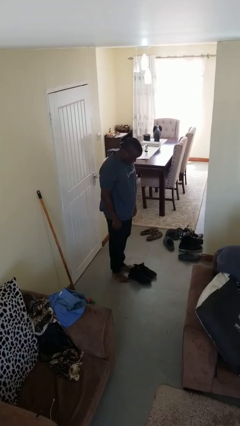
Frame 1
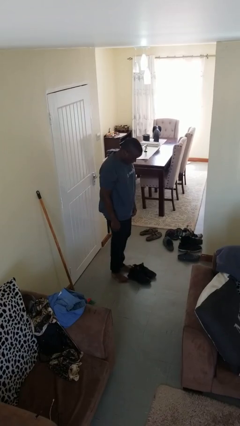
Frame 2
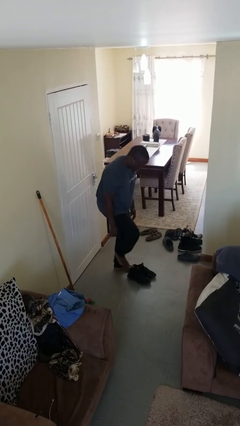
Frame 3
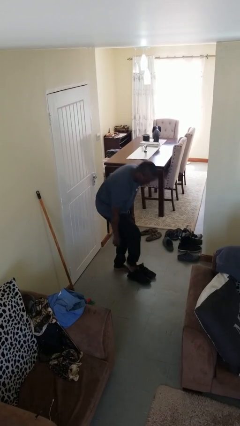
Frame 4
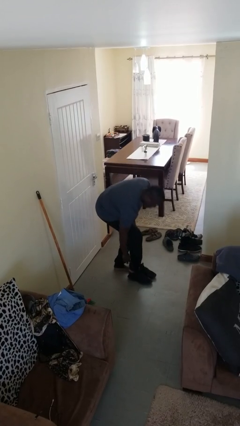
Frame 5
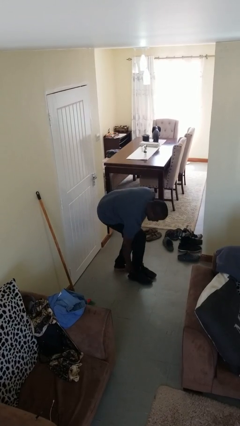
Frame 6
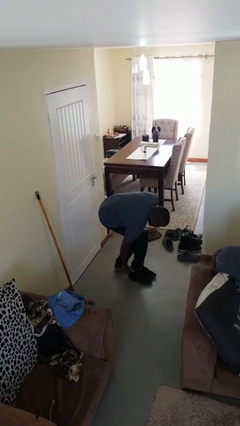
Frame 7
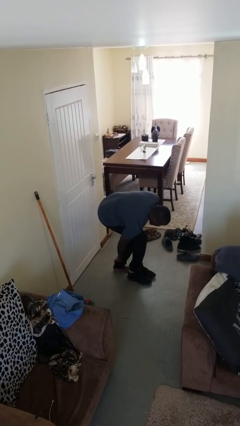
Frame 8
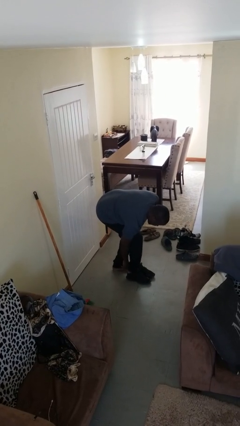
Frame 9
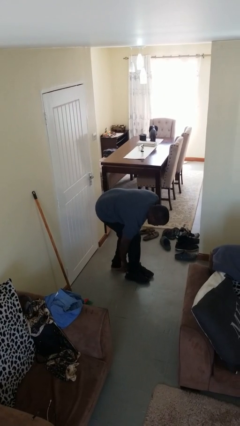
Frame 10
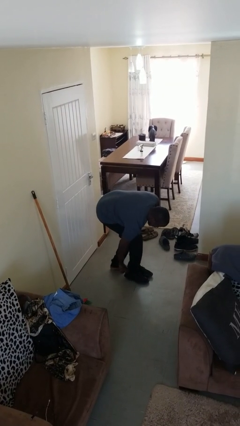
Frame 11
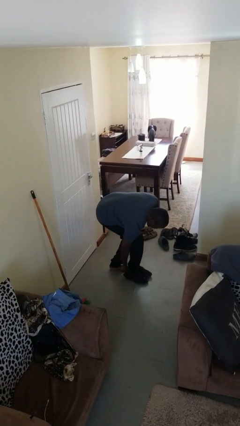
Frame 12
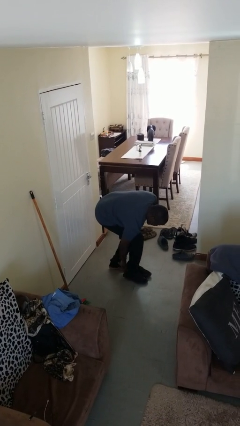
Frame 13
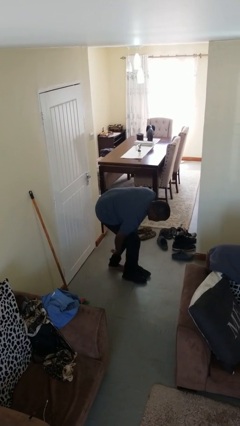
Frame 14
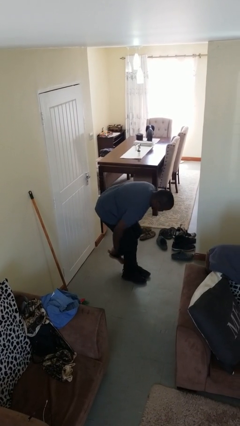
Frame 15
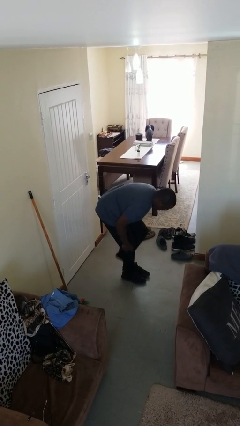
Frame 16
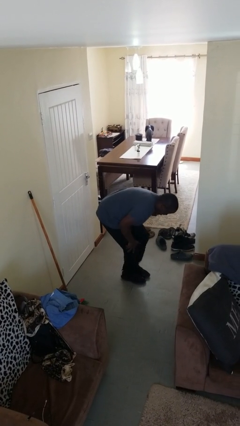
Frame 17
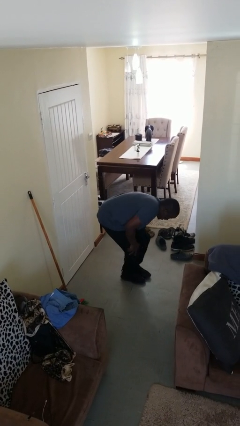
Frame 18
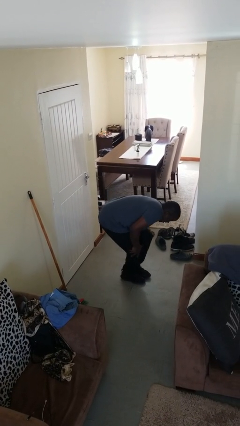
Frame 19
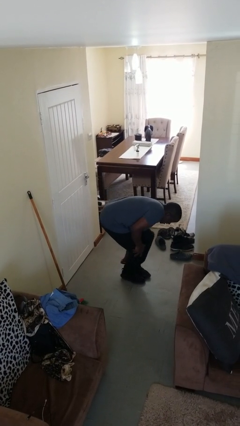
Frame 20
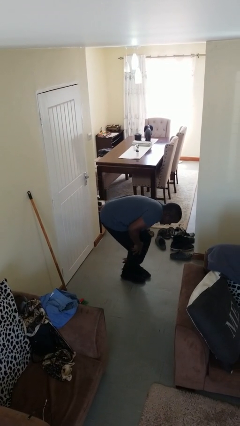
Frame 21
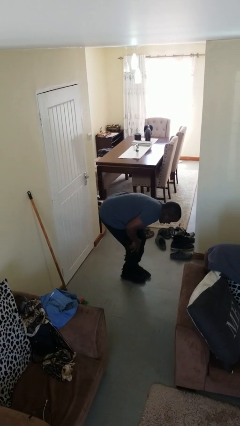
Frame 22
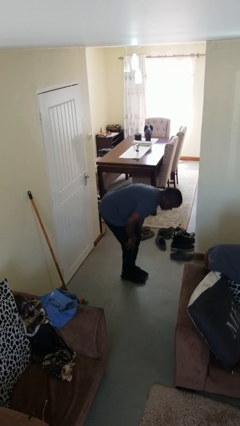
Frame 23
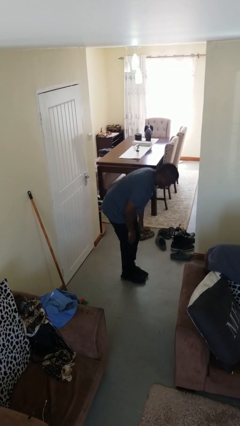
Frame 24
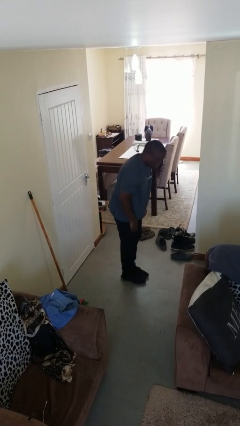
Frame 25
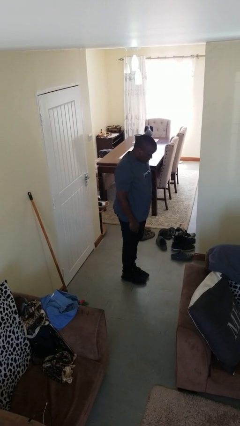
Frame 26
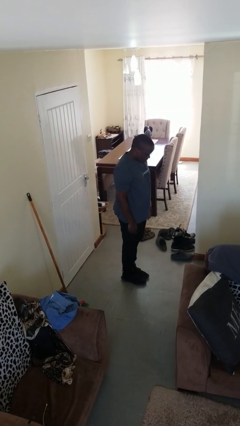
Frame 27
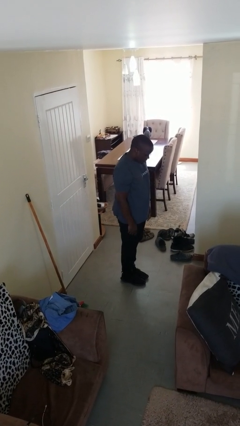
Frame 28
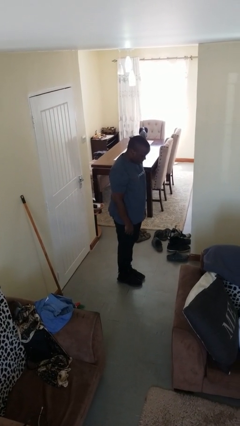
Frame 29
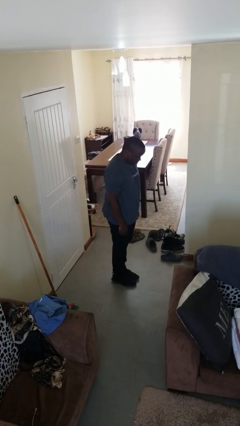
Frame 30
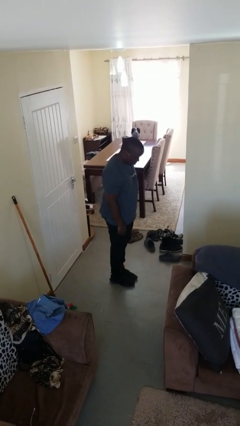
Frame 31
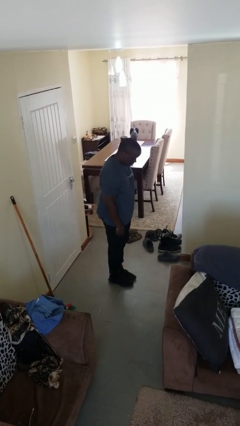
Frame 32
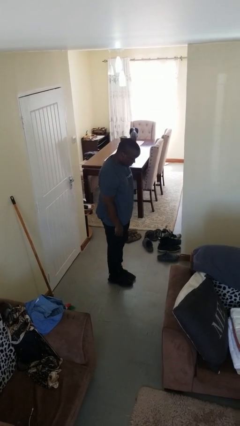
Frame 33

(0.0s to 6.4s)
person puts on shoes

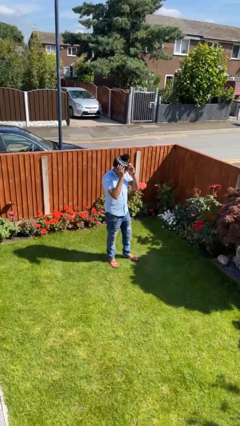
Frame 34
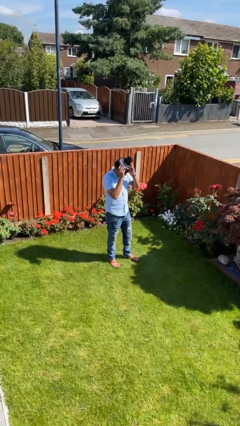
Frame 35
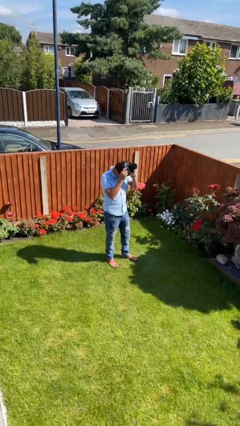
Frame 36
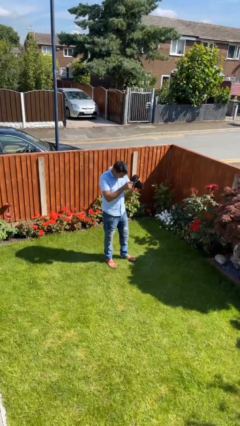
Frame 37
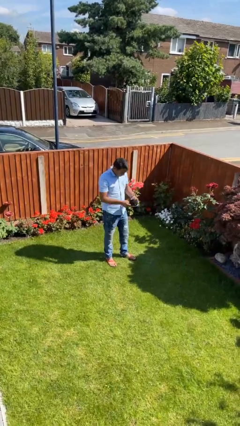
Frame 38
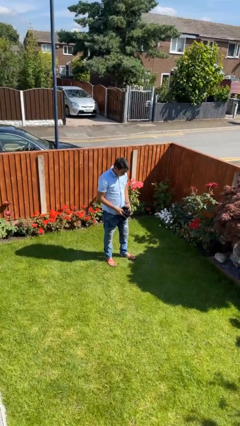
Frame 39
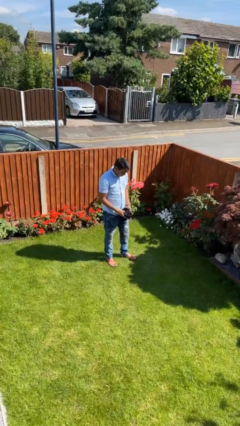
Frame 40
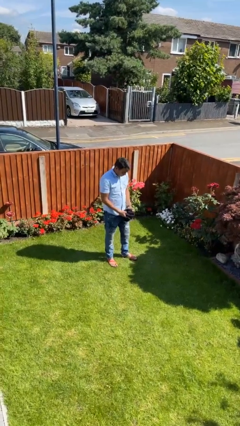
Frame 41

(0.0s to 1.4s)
person takes off hat

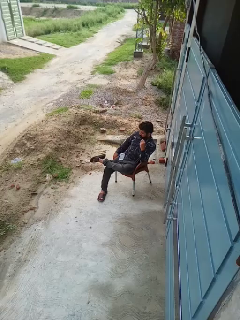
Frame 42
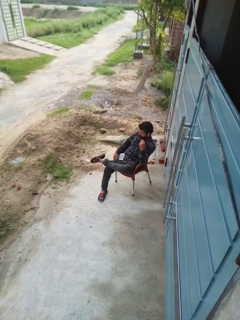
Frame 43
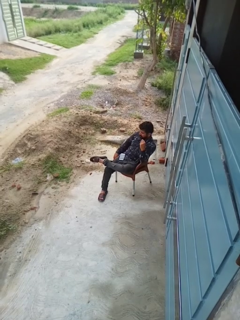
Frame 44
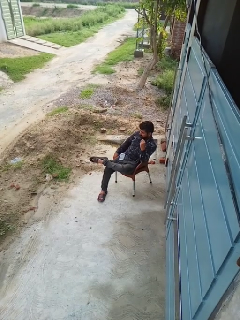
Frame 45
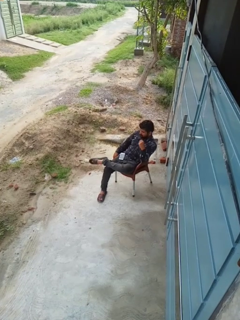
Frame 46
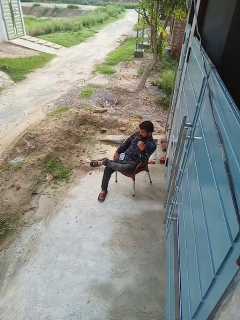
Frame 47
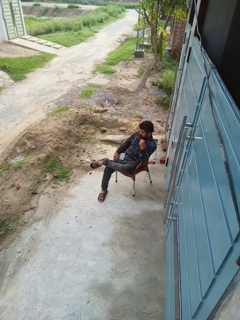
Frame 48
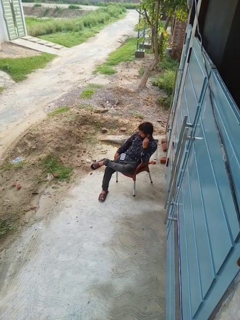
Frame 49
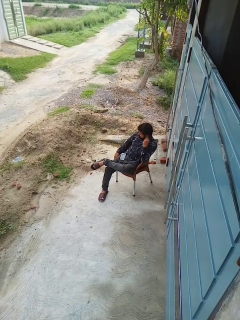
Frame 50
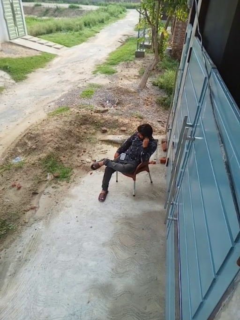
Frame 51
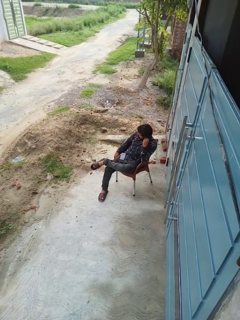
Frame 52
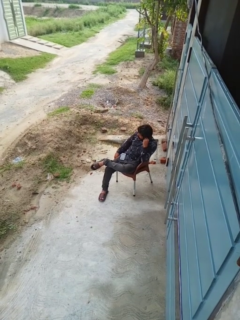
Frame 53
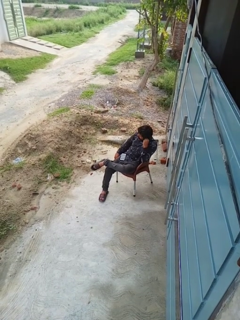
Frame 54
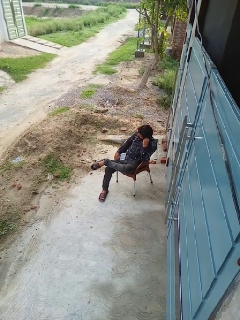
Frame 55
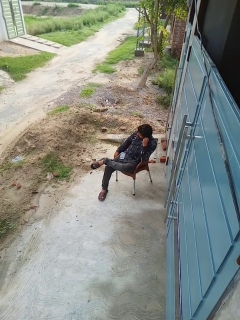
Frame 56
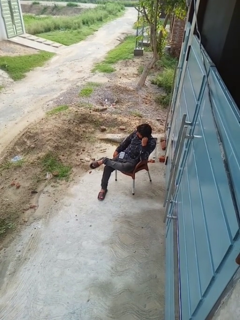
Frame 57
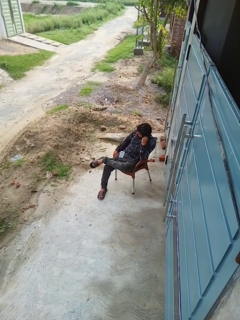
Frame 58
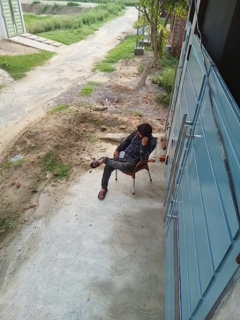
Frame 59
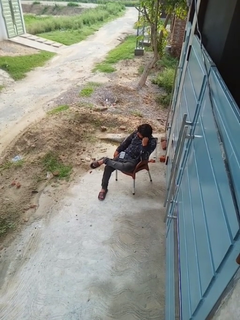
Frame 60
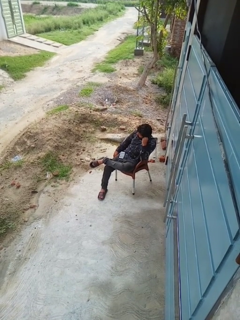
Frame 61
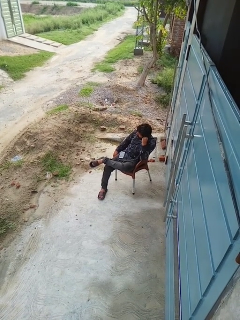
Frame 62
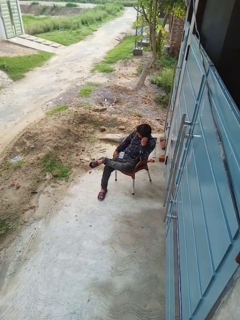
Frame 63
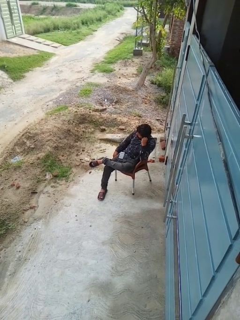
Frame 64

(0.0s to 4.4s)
person puts on headphones

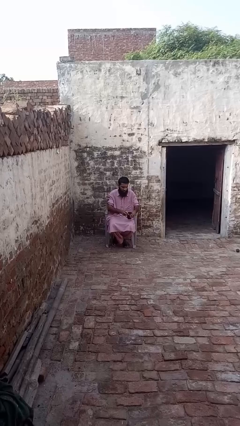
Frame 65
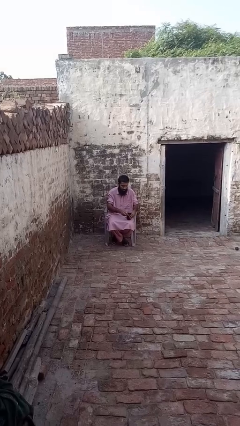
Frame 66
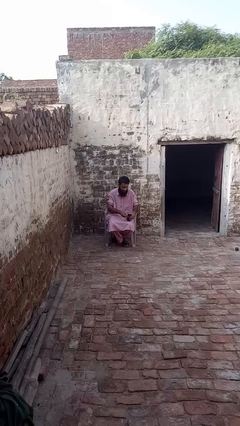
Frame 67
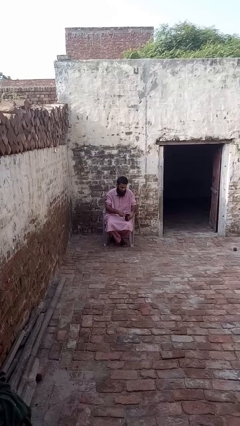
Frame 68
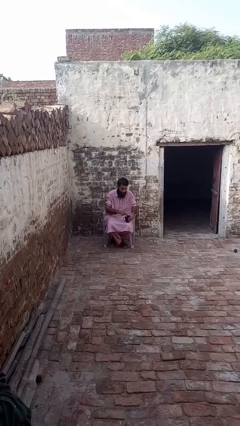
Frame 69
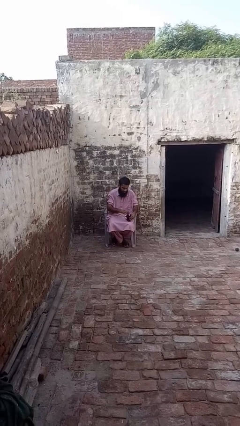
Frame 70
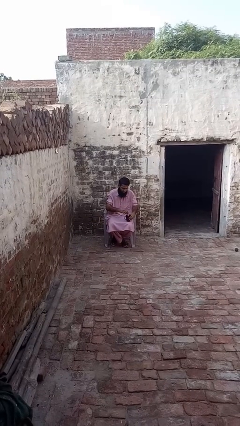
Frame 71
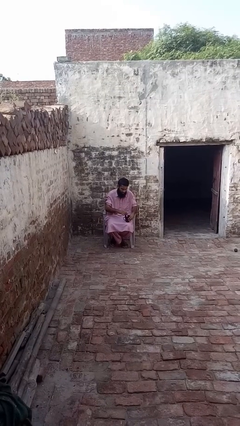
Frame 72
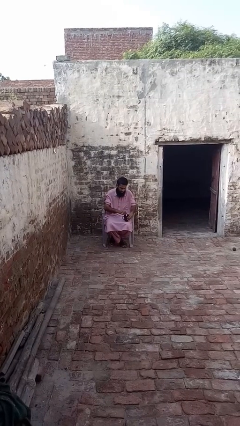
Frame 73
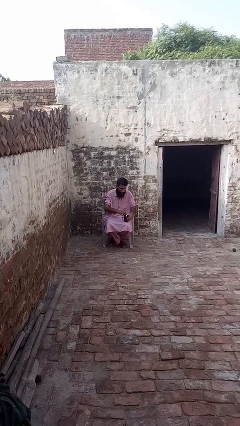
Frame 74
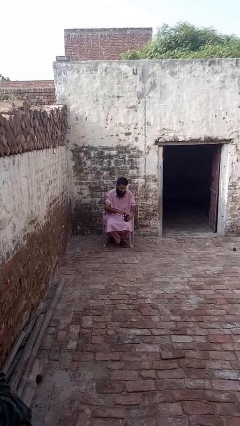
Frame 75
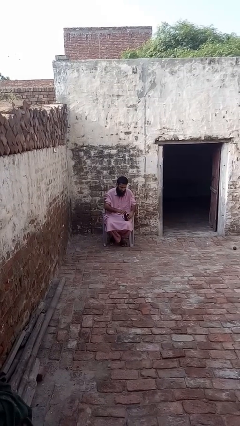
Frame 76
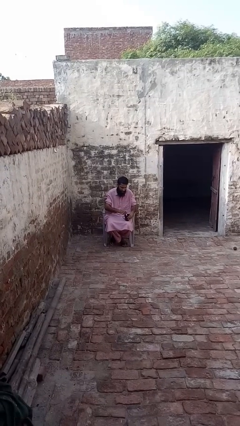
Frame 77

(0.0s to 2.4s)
person stirs mug

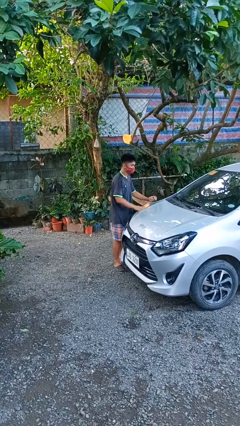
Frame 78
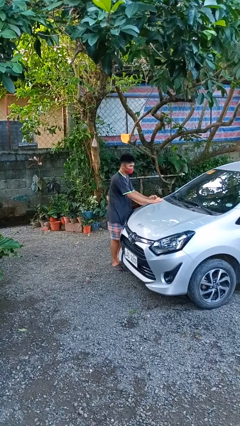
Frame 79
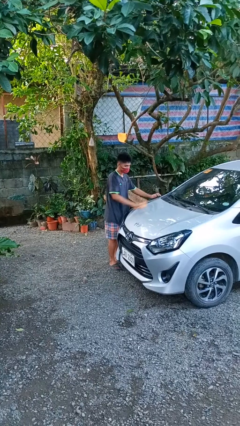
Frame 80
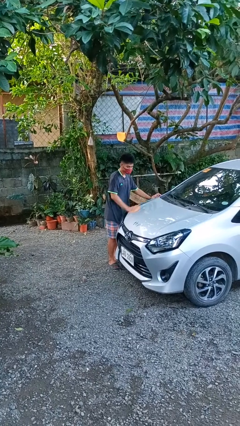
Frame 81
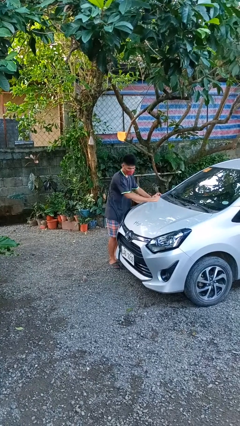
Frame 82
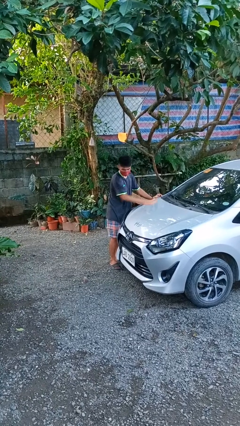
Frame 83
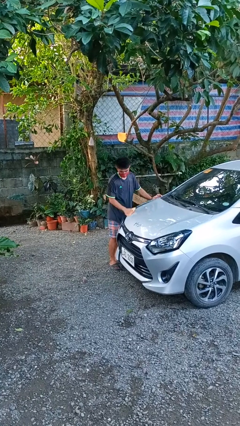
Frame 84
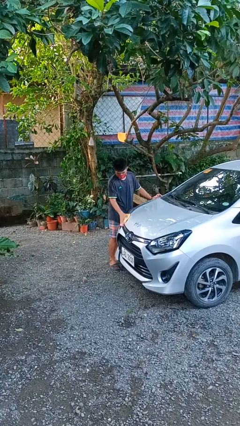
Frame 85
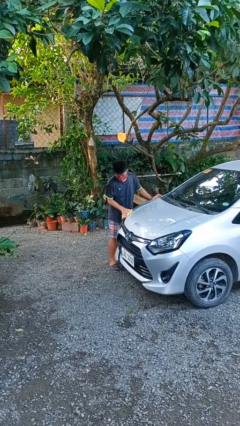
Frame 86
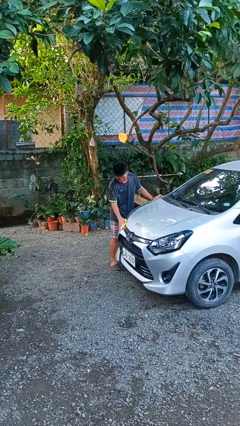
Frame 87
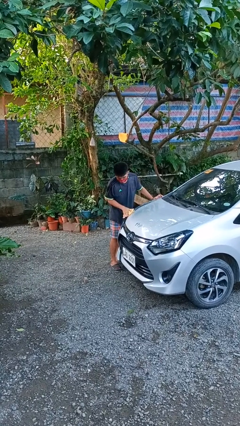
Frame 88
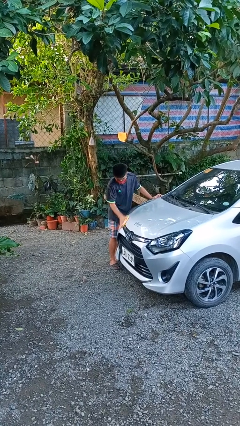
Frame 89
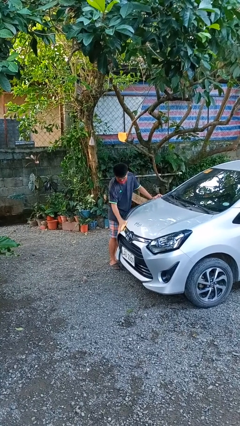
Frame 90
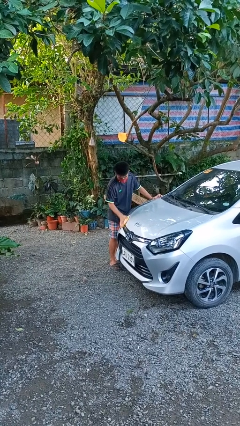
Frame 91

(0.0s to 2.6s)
person polishes car with rag

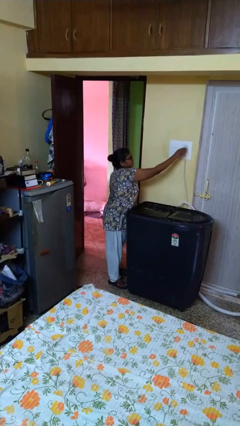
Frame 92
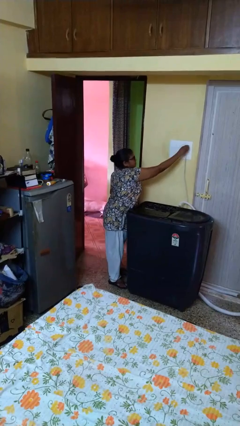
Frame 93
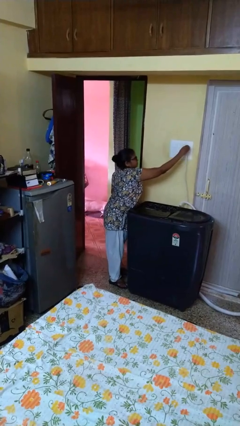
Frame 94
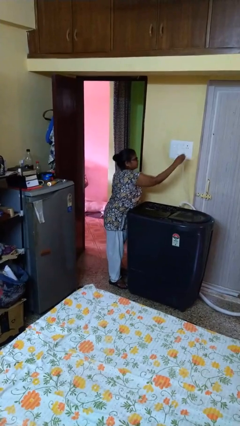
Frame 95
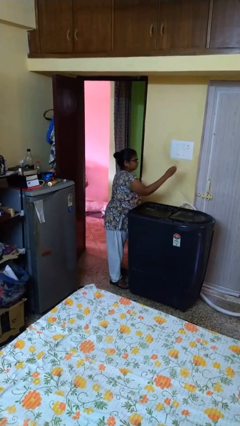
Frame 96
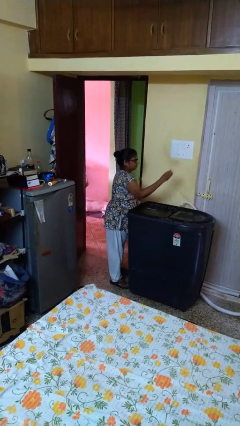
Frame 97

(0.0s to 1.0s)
person unplugs from electrical socket

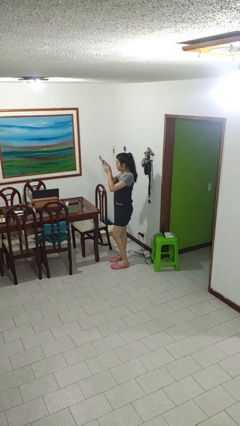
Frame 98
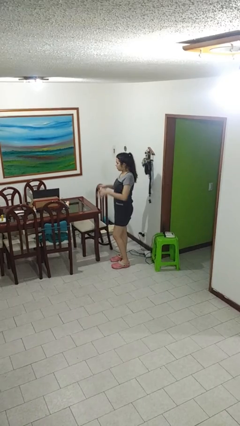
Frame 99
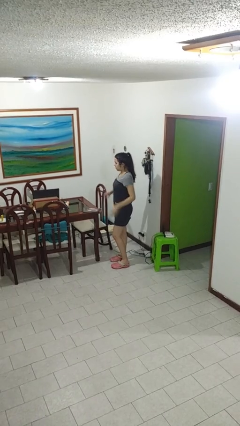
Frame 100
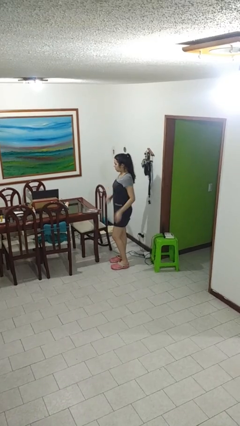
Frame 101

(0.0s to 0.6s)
person throws object on table
